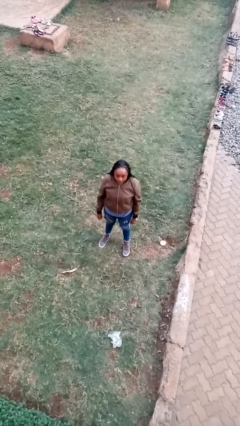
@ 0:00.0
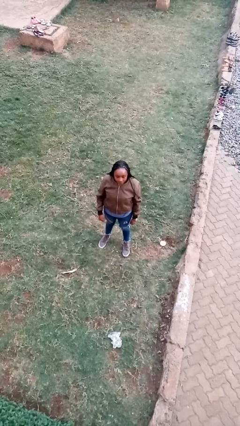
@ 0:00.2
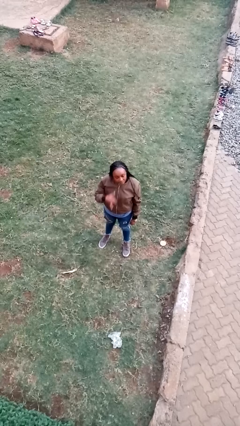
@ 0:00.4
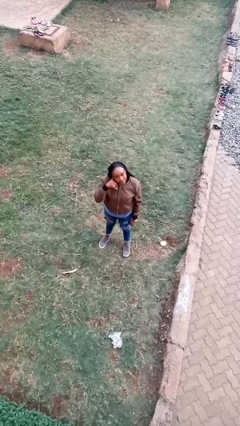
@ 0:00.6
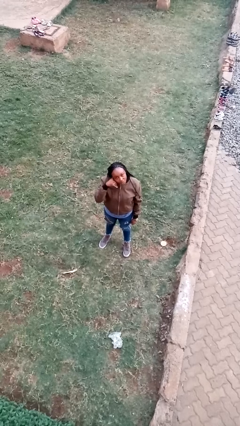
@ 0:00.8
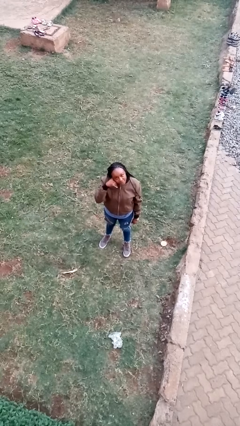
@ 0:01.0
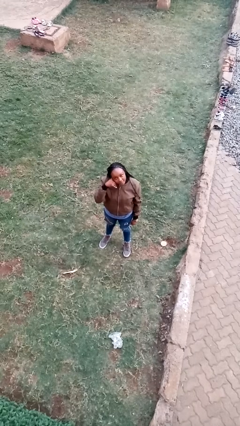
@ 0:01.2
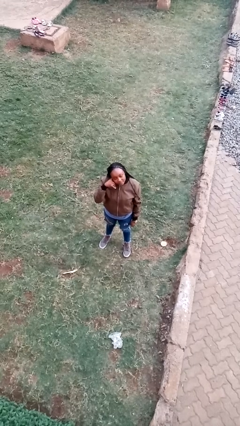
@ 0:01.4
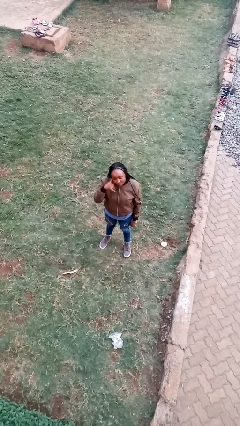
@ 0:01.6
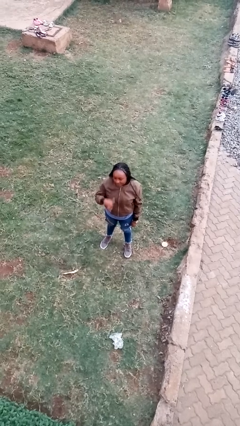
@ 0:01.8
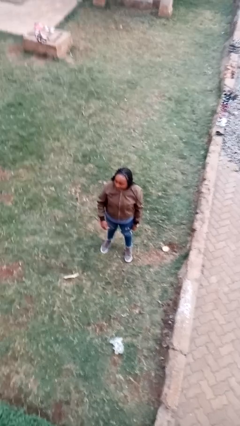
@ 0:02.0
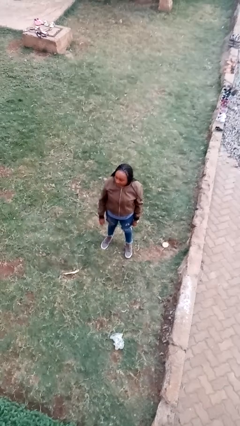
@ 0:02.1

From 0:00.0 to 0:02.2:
person gestures call me

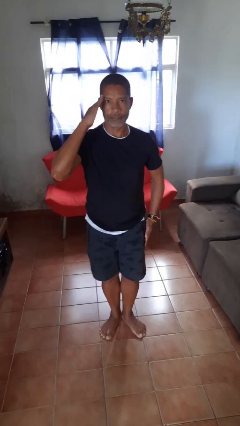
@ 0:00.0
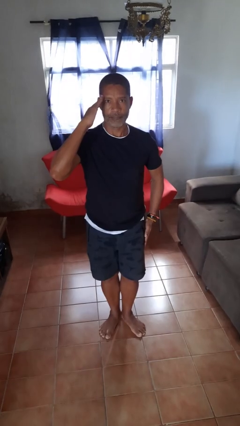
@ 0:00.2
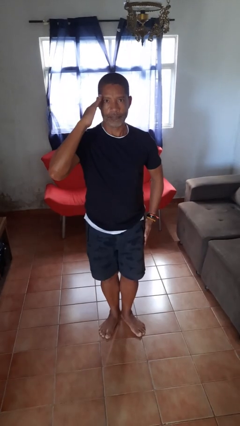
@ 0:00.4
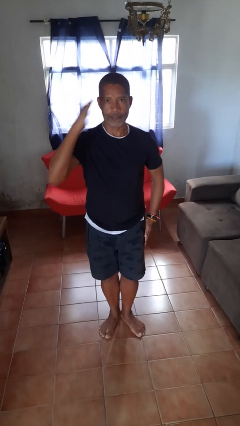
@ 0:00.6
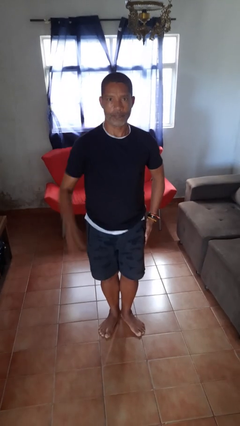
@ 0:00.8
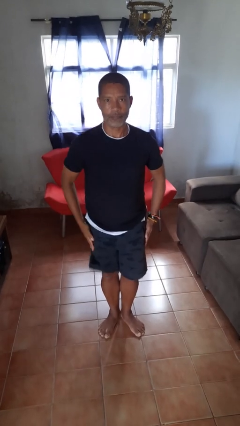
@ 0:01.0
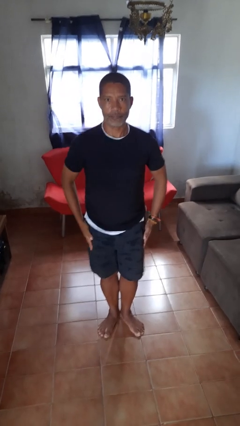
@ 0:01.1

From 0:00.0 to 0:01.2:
person salutes

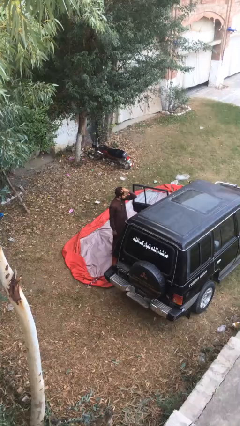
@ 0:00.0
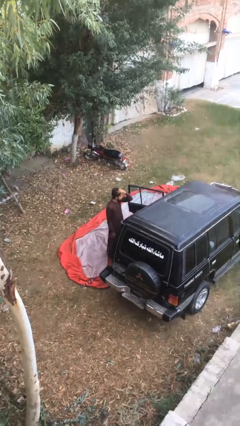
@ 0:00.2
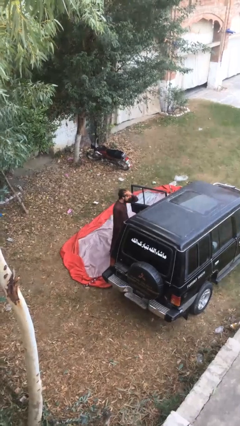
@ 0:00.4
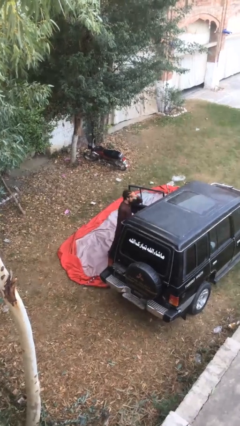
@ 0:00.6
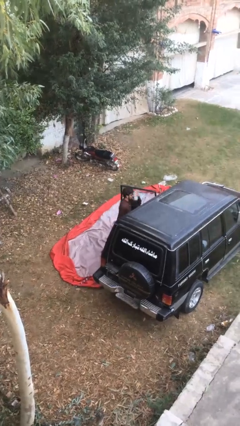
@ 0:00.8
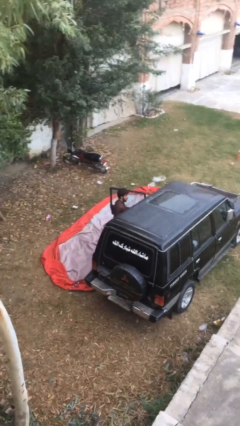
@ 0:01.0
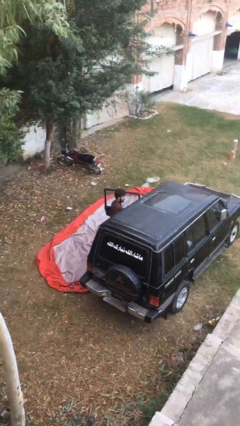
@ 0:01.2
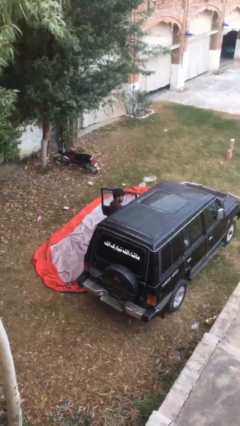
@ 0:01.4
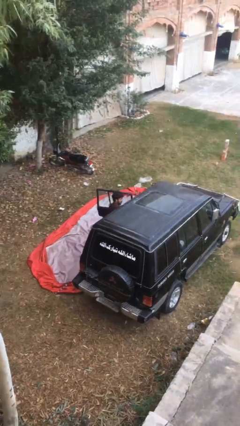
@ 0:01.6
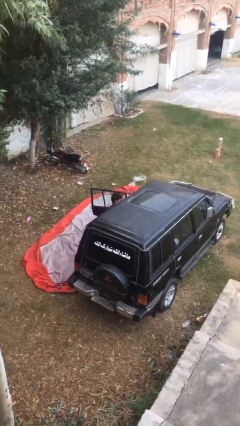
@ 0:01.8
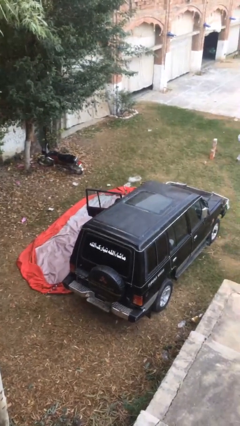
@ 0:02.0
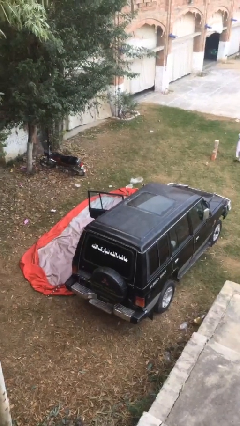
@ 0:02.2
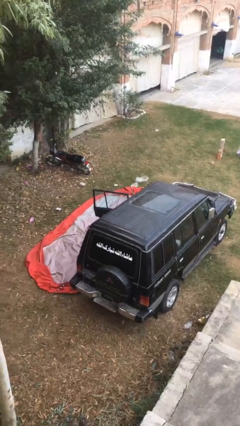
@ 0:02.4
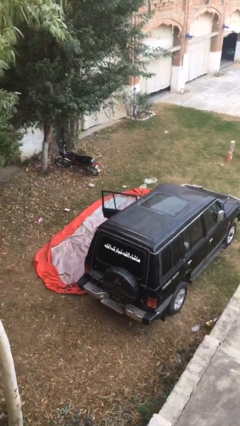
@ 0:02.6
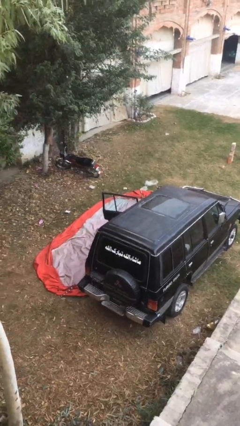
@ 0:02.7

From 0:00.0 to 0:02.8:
person enters car

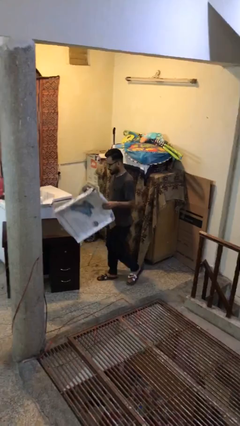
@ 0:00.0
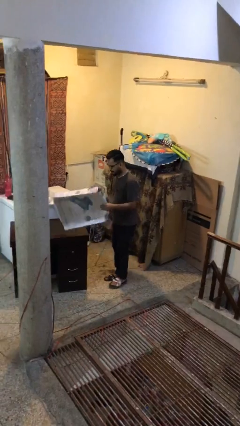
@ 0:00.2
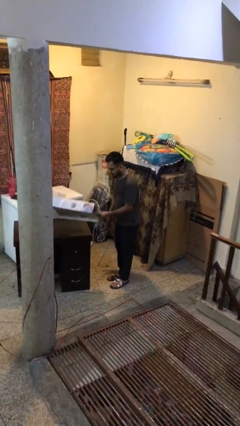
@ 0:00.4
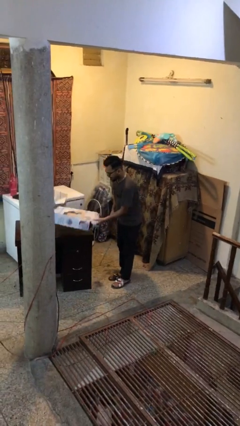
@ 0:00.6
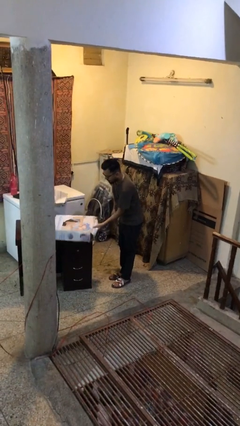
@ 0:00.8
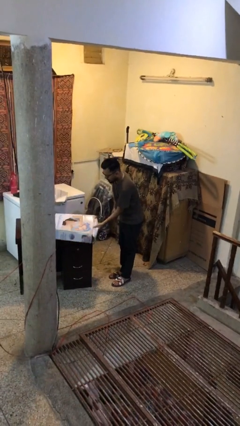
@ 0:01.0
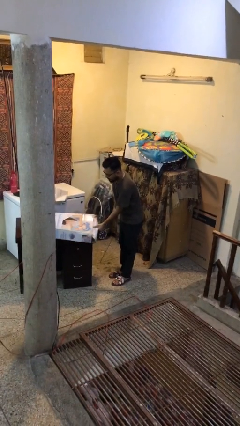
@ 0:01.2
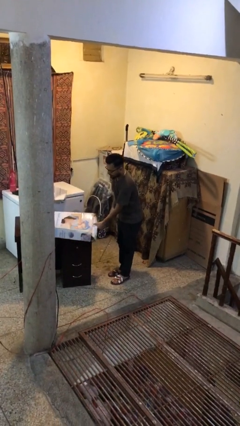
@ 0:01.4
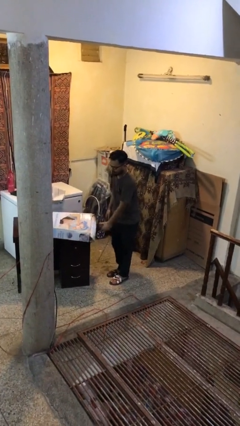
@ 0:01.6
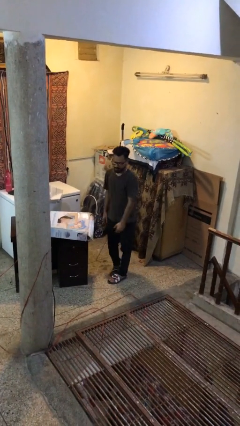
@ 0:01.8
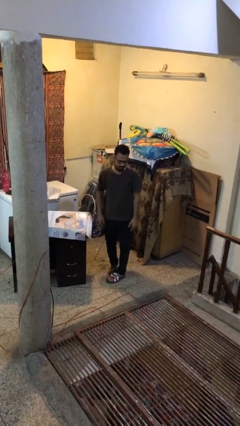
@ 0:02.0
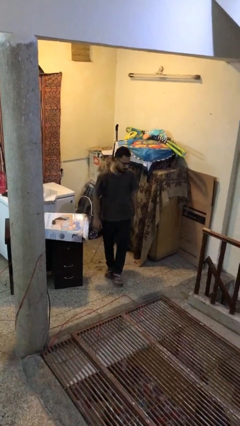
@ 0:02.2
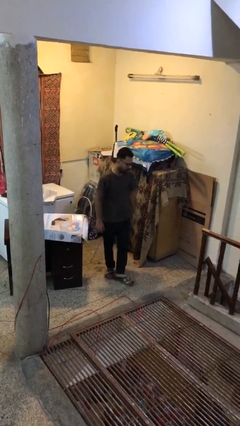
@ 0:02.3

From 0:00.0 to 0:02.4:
person puts down object on table

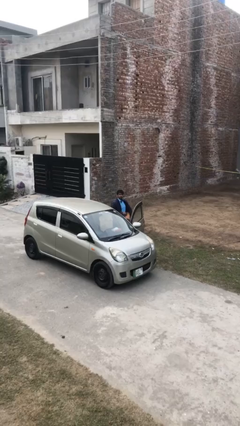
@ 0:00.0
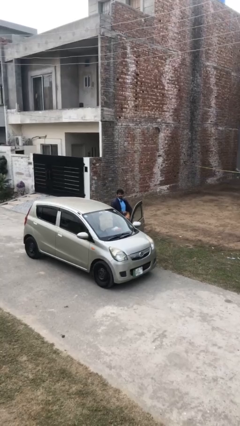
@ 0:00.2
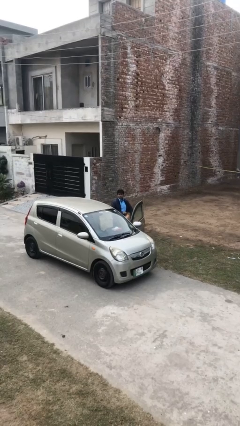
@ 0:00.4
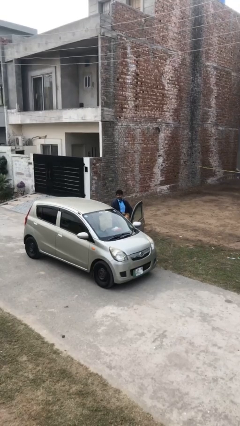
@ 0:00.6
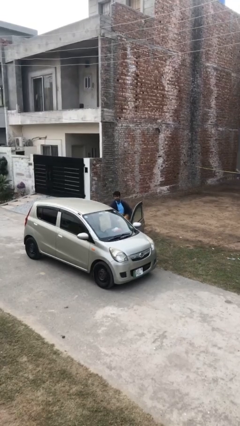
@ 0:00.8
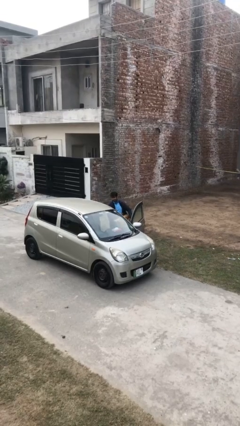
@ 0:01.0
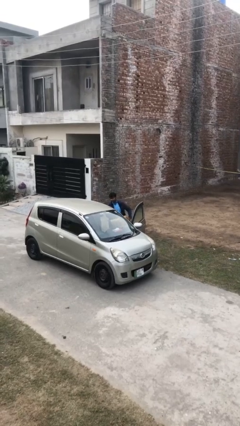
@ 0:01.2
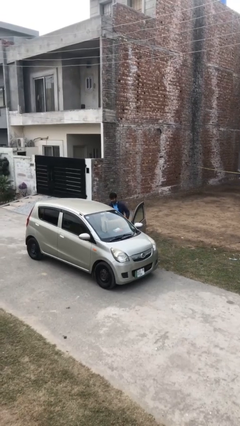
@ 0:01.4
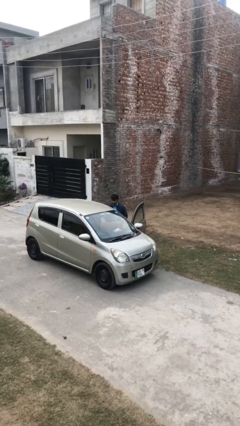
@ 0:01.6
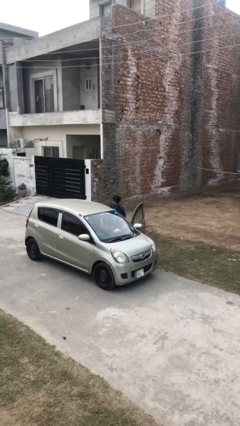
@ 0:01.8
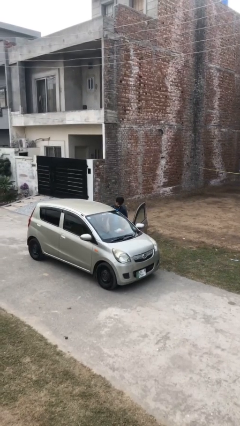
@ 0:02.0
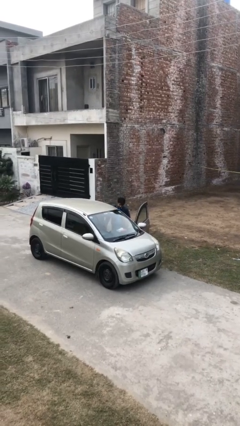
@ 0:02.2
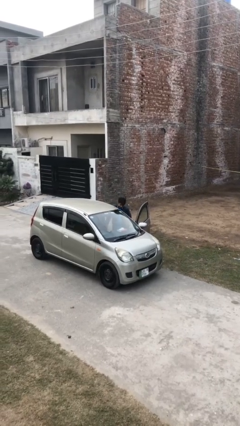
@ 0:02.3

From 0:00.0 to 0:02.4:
person loads car

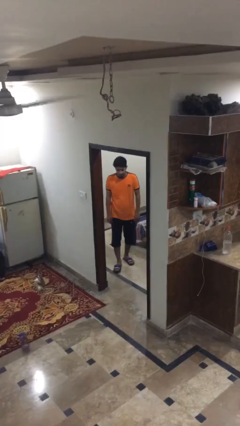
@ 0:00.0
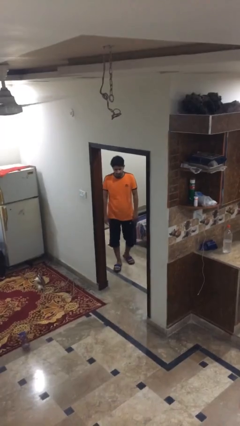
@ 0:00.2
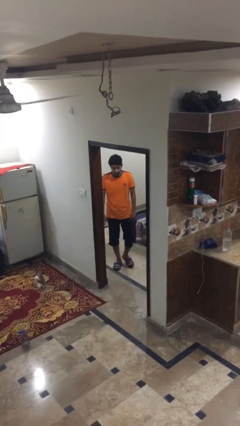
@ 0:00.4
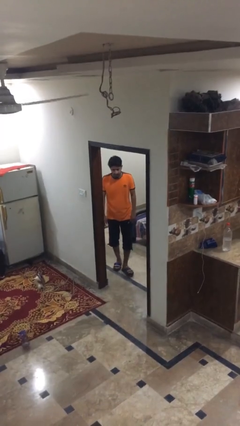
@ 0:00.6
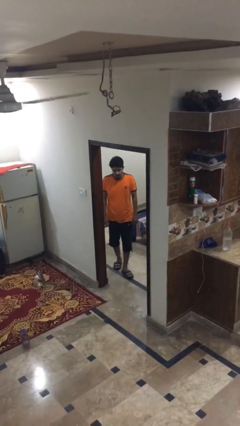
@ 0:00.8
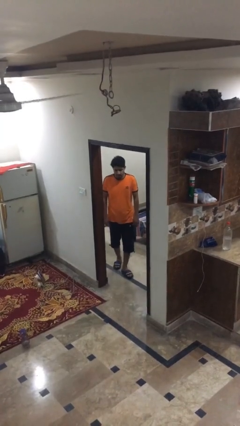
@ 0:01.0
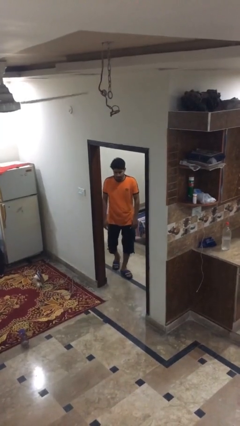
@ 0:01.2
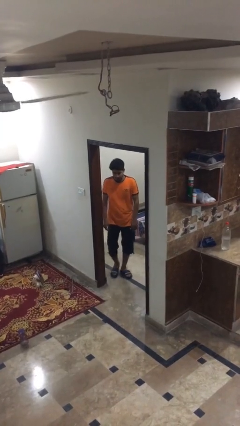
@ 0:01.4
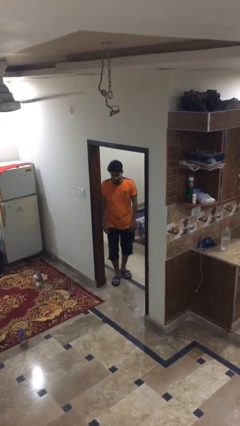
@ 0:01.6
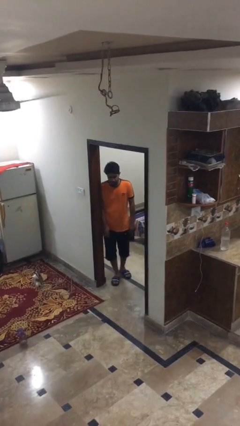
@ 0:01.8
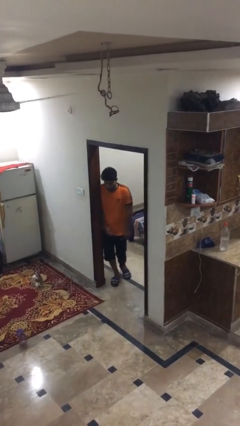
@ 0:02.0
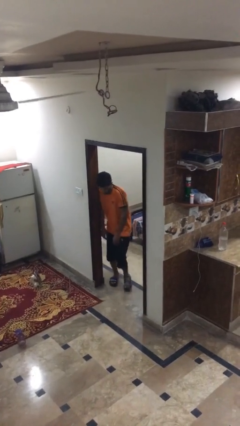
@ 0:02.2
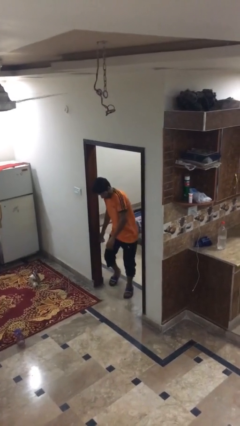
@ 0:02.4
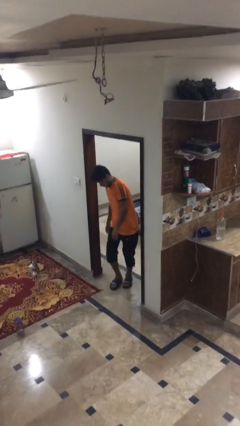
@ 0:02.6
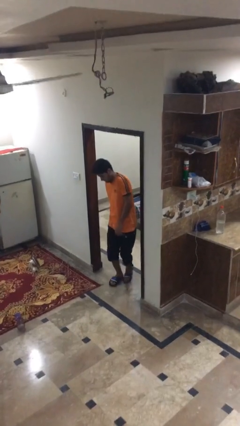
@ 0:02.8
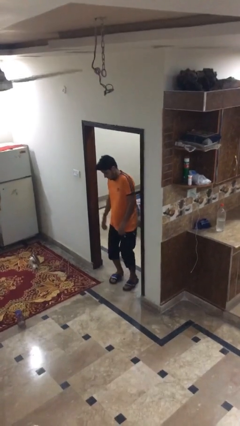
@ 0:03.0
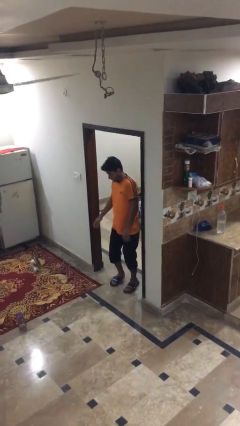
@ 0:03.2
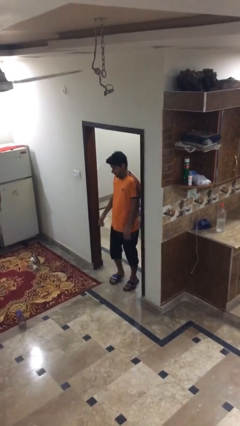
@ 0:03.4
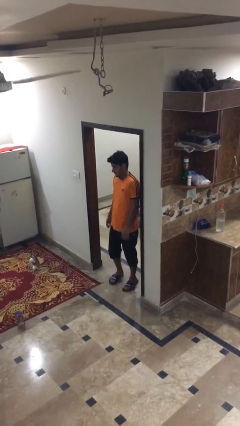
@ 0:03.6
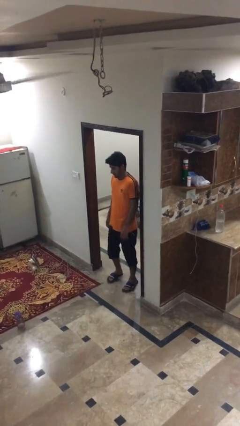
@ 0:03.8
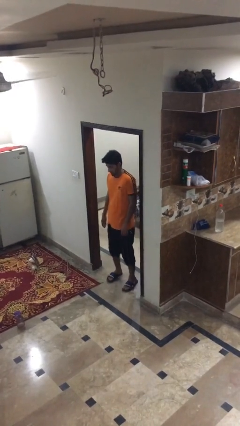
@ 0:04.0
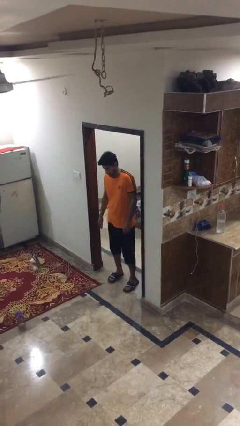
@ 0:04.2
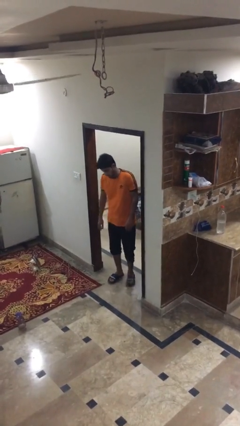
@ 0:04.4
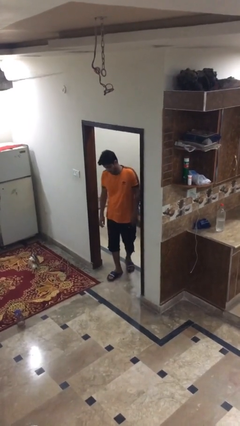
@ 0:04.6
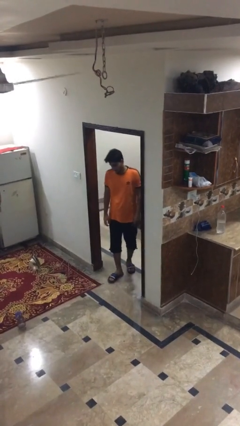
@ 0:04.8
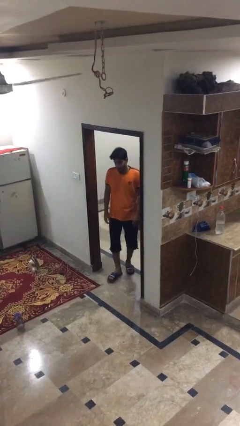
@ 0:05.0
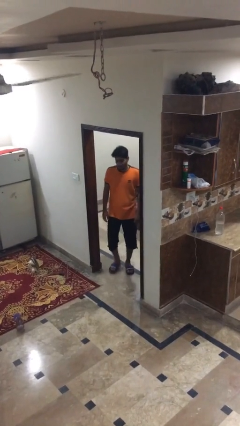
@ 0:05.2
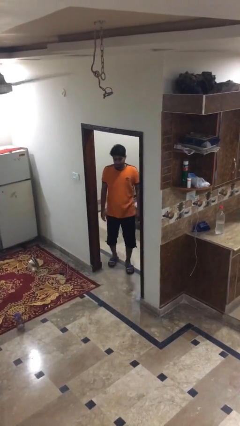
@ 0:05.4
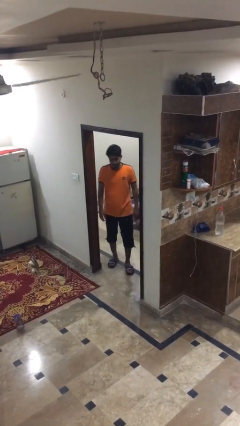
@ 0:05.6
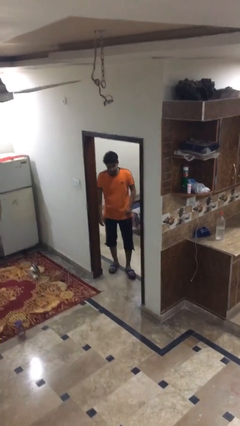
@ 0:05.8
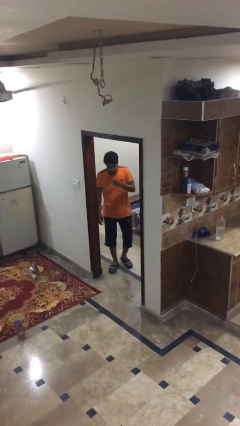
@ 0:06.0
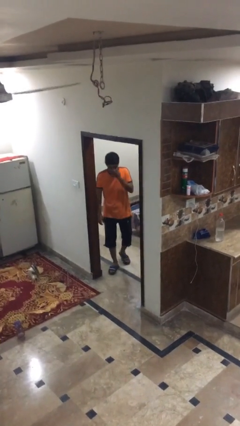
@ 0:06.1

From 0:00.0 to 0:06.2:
person bumps into wall

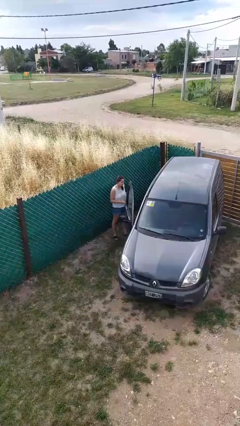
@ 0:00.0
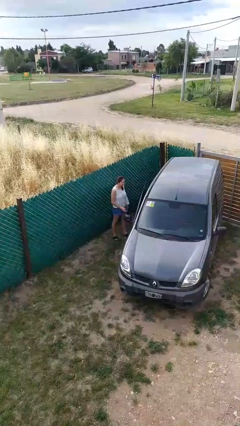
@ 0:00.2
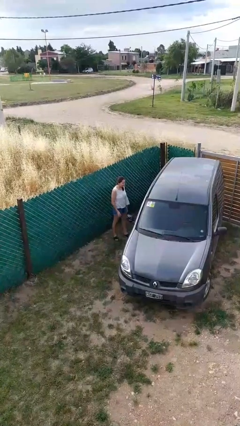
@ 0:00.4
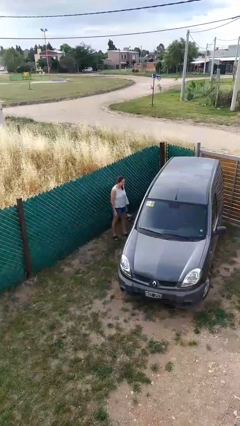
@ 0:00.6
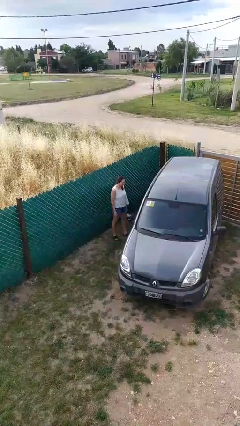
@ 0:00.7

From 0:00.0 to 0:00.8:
person closes car door
